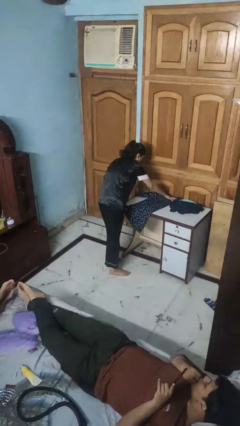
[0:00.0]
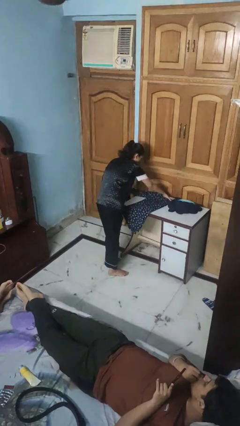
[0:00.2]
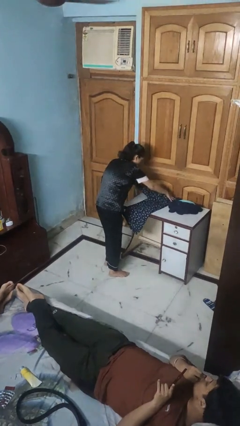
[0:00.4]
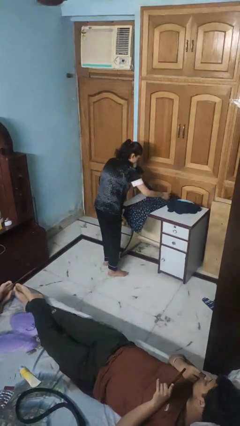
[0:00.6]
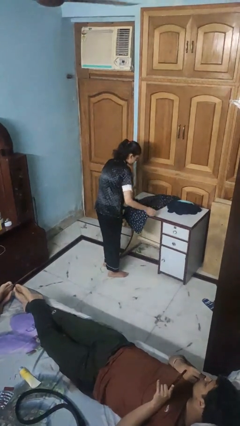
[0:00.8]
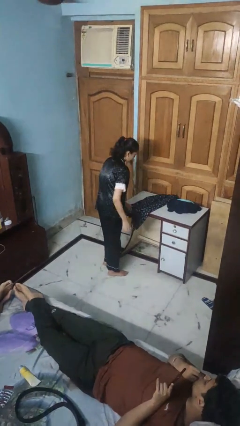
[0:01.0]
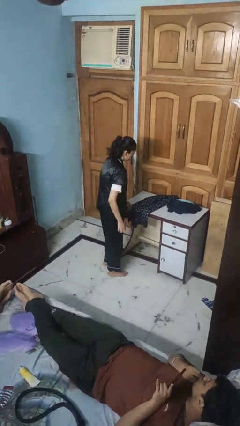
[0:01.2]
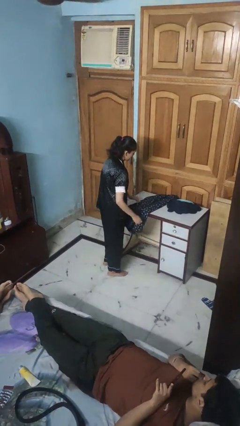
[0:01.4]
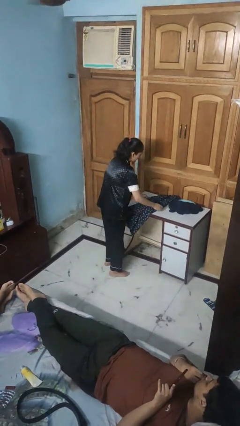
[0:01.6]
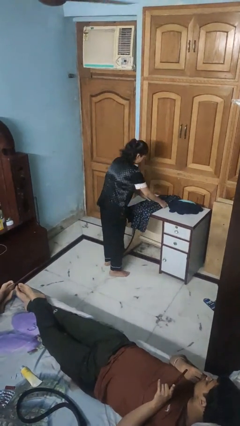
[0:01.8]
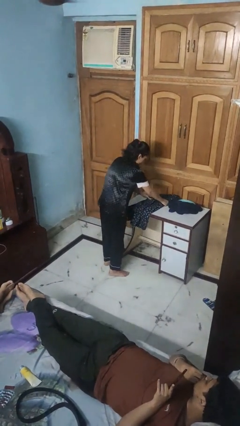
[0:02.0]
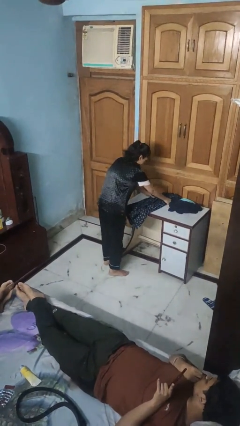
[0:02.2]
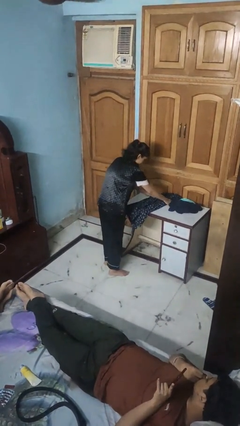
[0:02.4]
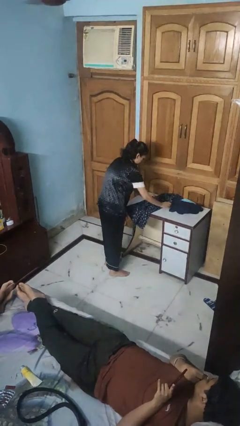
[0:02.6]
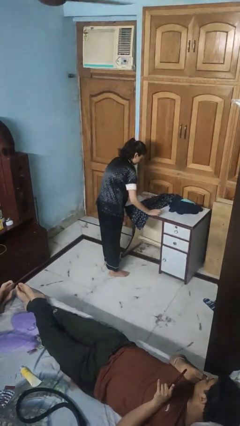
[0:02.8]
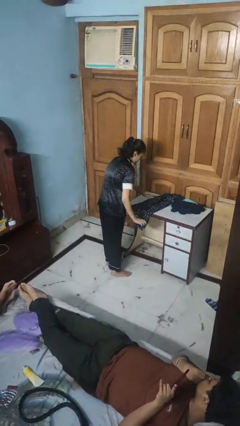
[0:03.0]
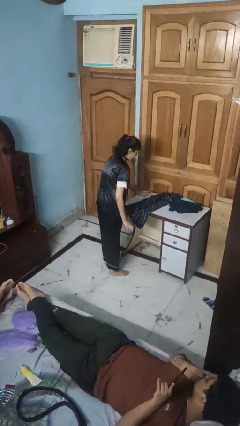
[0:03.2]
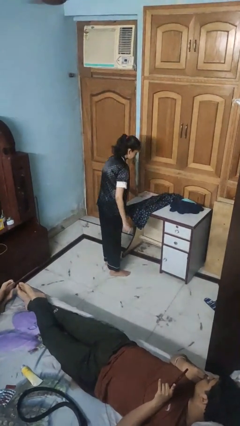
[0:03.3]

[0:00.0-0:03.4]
person folds shirt

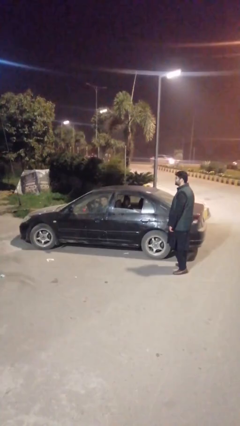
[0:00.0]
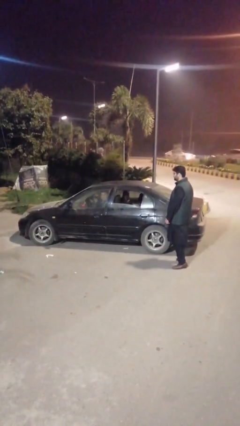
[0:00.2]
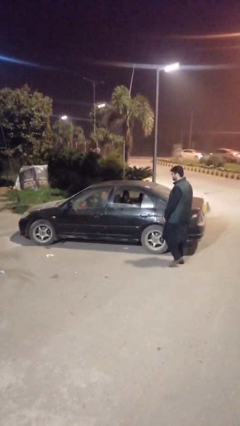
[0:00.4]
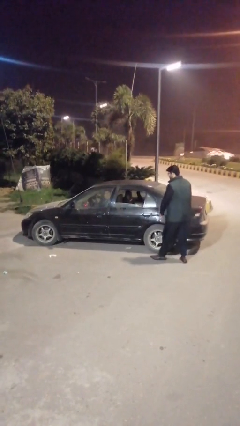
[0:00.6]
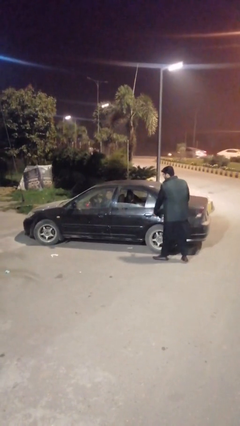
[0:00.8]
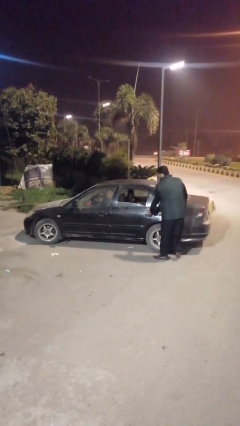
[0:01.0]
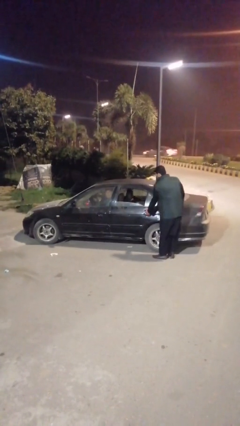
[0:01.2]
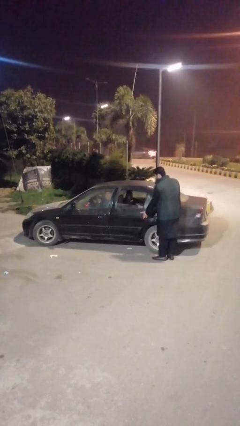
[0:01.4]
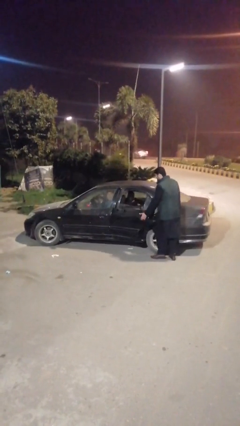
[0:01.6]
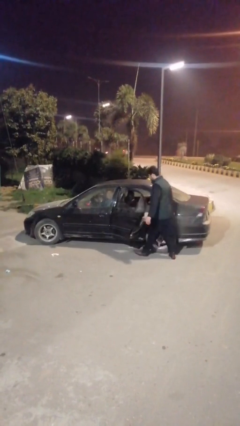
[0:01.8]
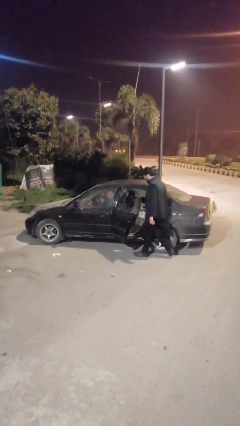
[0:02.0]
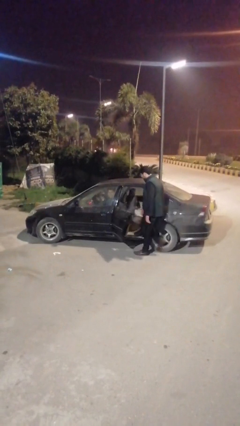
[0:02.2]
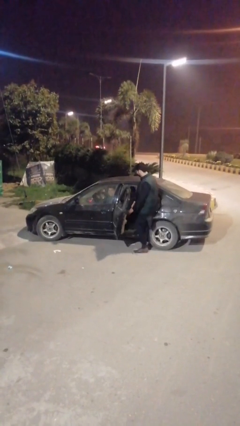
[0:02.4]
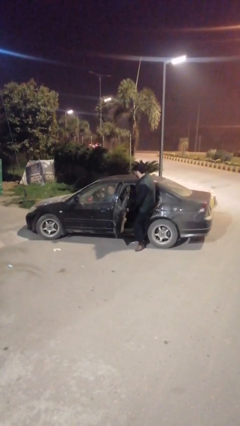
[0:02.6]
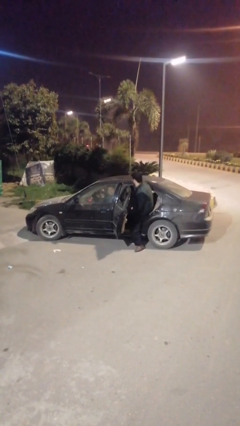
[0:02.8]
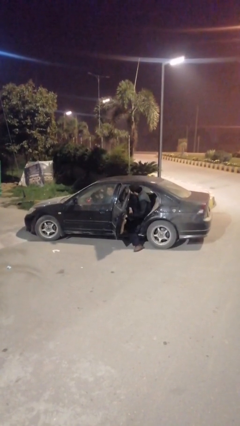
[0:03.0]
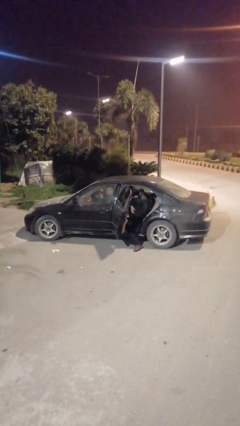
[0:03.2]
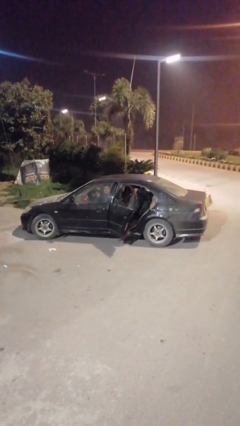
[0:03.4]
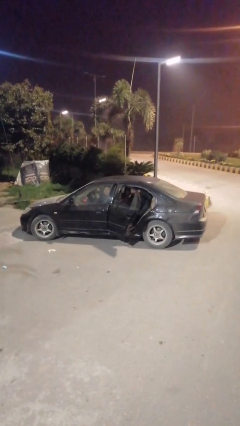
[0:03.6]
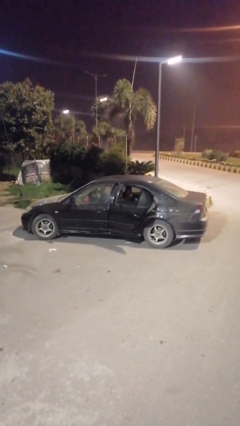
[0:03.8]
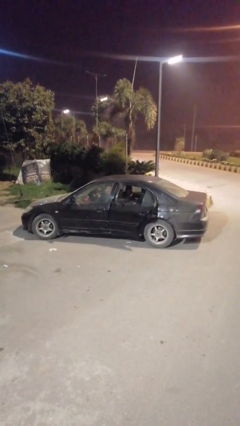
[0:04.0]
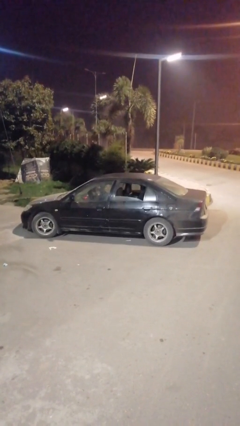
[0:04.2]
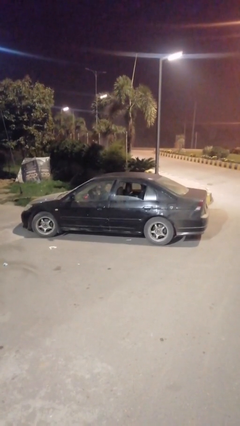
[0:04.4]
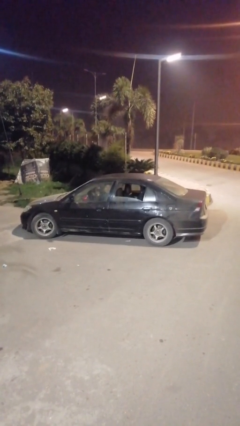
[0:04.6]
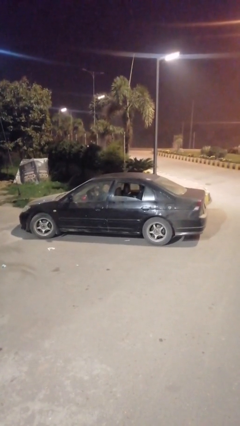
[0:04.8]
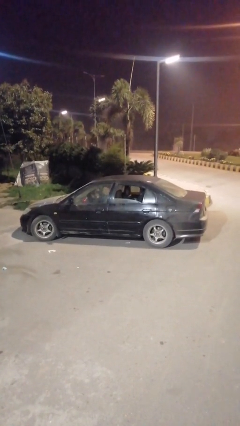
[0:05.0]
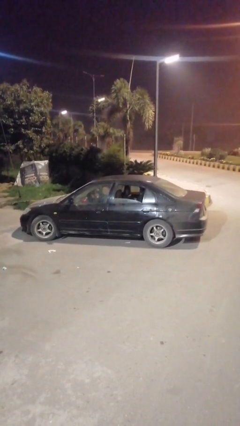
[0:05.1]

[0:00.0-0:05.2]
car picks up person

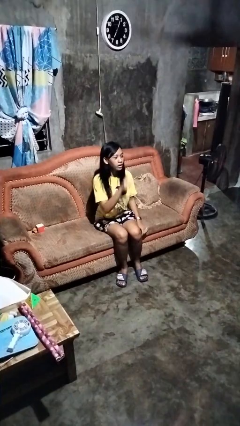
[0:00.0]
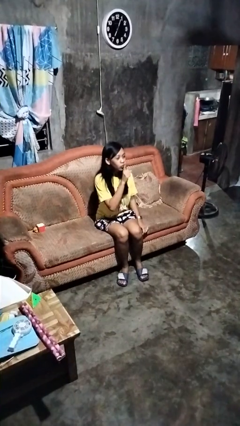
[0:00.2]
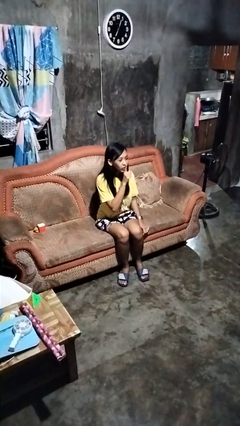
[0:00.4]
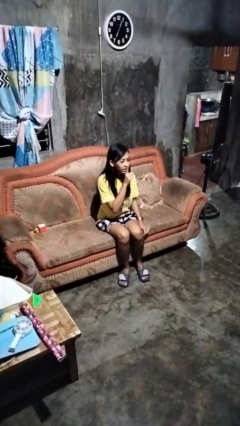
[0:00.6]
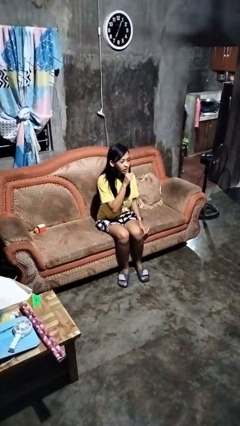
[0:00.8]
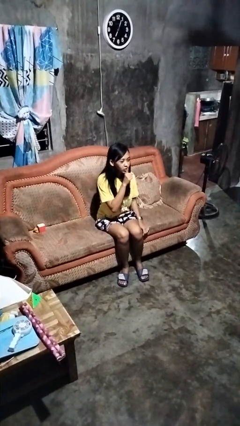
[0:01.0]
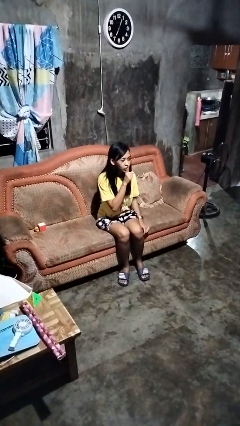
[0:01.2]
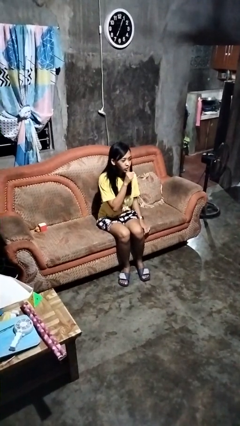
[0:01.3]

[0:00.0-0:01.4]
person gestures be quiet

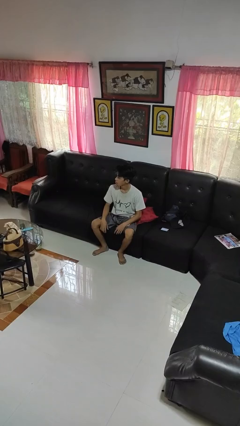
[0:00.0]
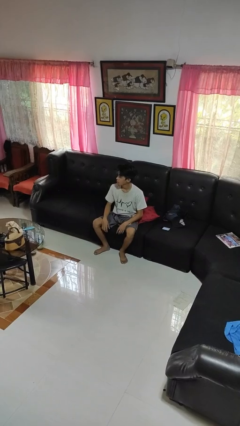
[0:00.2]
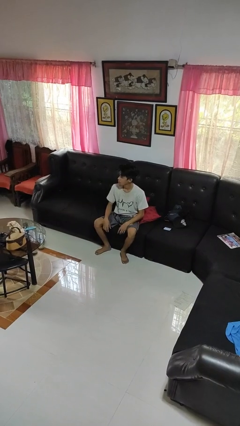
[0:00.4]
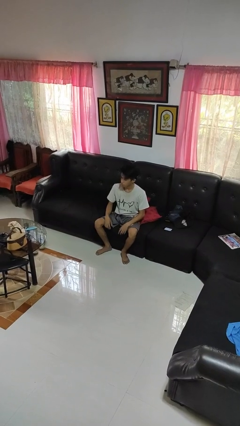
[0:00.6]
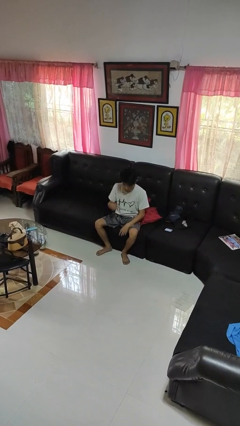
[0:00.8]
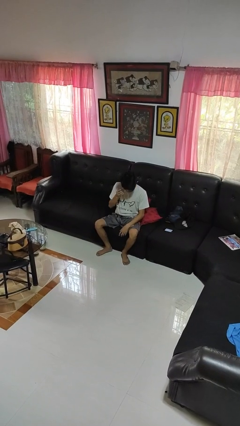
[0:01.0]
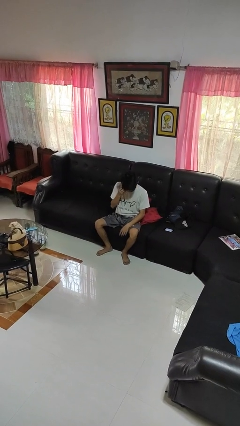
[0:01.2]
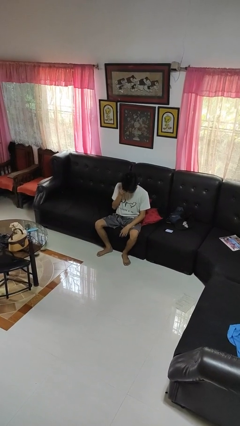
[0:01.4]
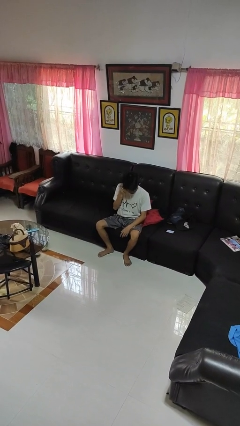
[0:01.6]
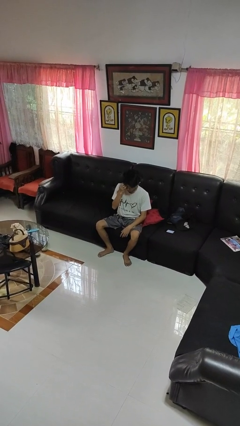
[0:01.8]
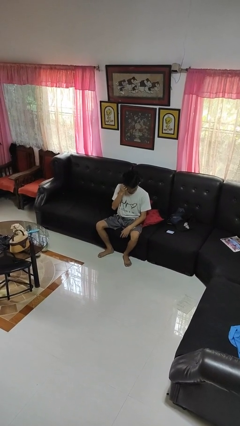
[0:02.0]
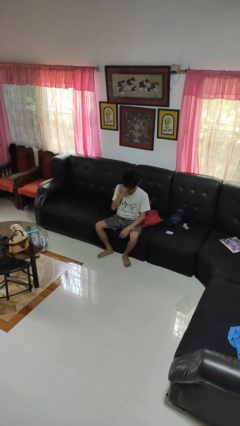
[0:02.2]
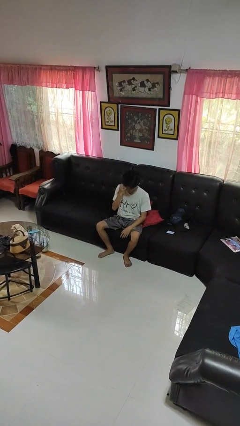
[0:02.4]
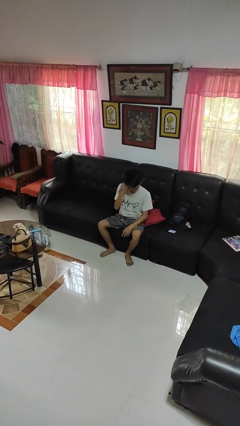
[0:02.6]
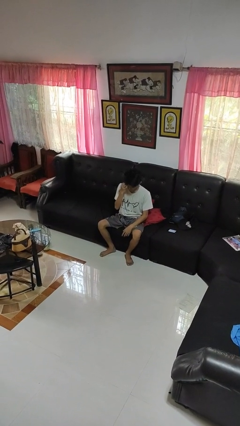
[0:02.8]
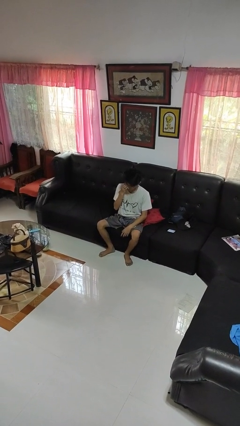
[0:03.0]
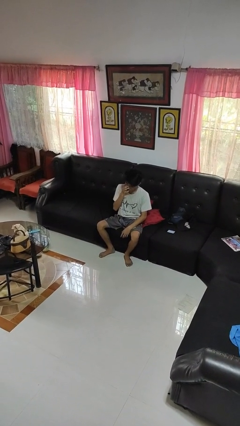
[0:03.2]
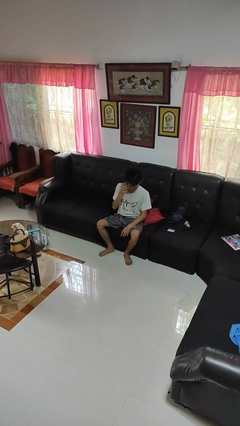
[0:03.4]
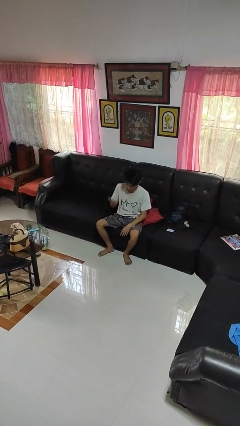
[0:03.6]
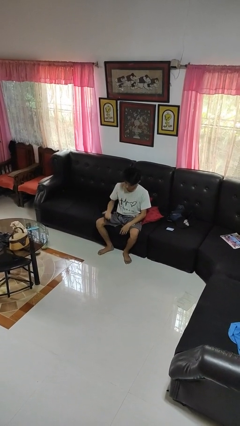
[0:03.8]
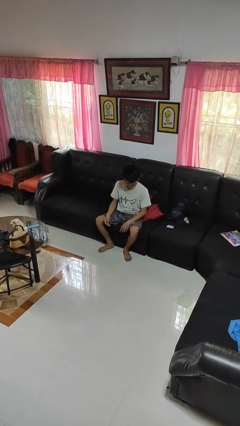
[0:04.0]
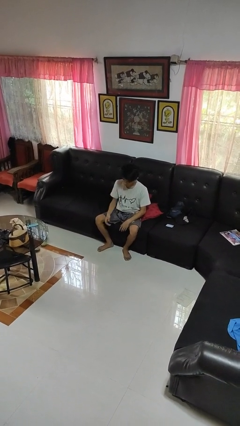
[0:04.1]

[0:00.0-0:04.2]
person scratches face

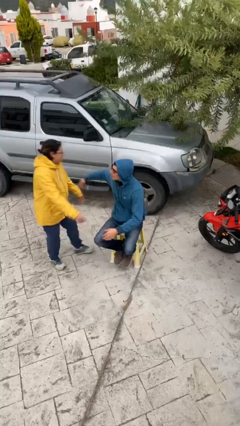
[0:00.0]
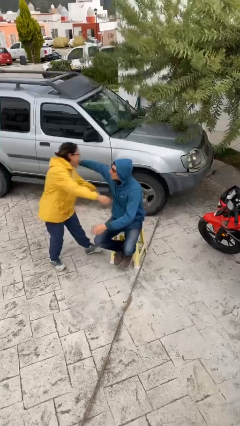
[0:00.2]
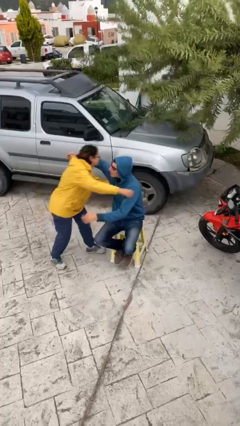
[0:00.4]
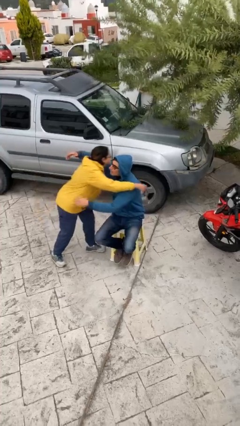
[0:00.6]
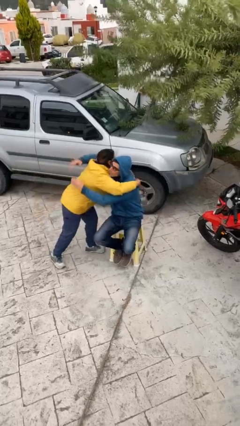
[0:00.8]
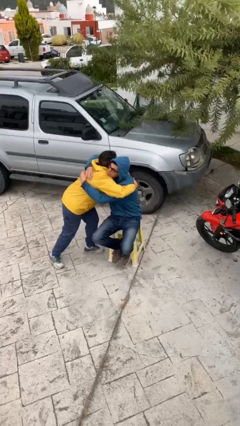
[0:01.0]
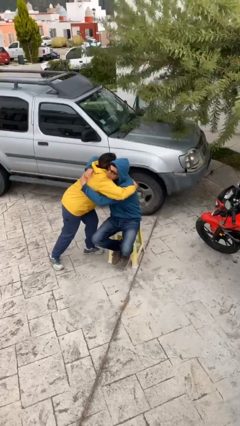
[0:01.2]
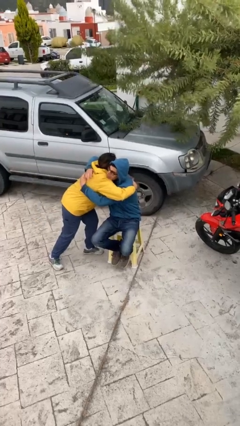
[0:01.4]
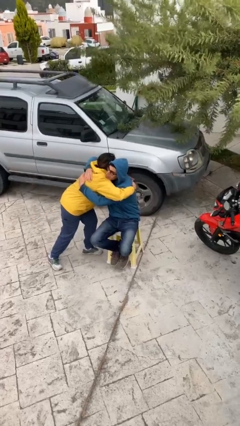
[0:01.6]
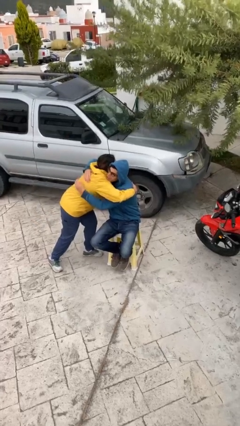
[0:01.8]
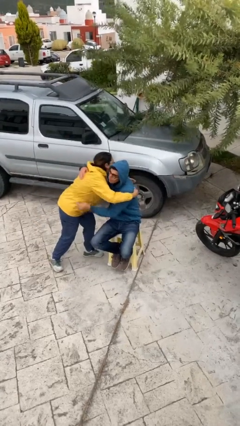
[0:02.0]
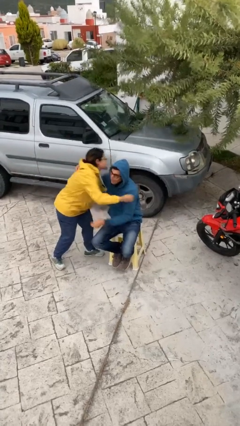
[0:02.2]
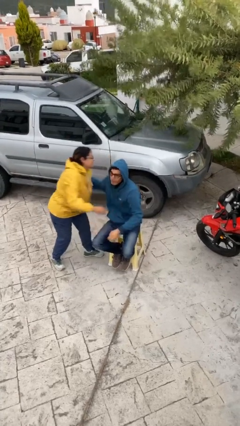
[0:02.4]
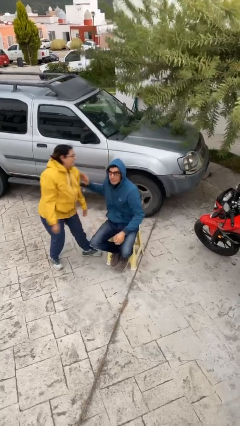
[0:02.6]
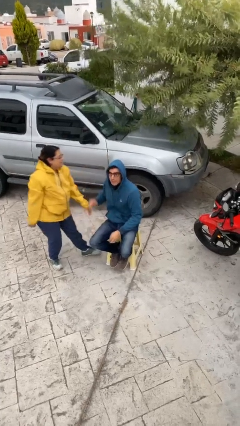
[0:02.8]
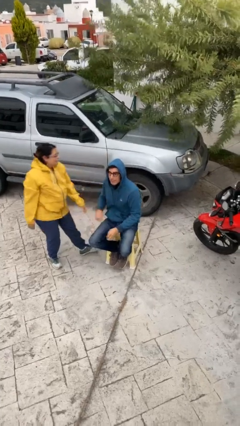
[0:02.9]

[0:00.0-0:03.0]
person embraces person

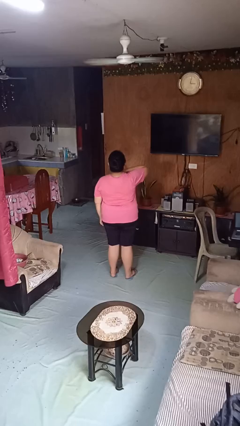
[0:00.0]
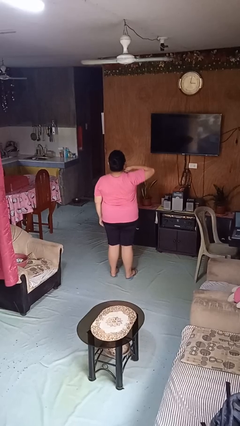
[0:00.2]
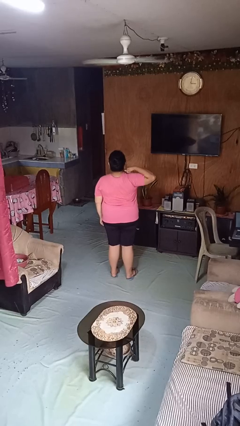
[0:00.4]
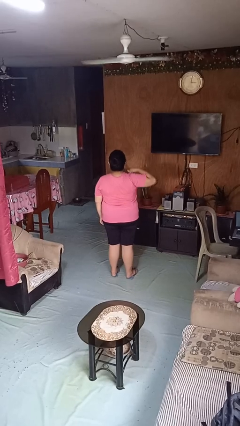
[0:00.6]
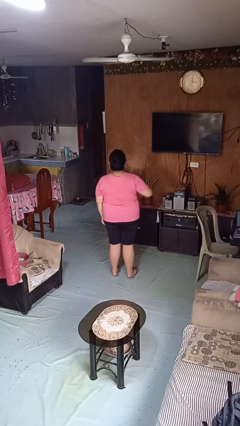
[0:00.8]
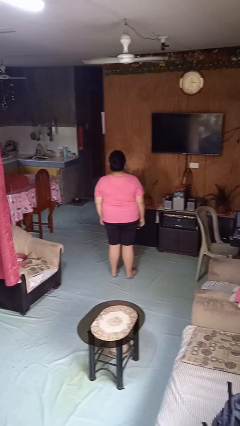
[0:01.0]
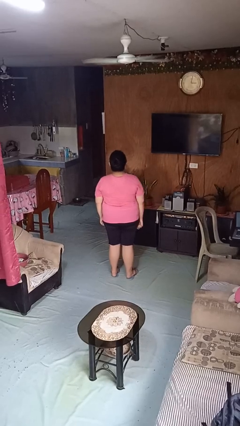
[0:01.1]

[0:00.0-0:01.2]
person gestures cut
